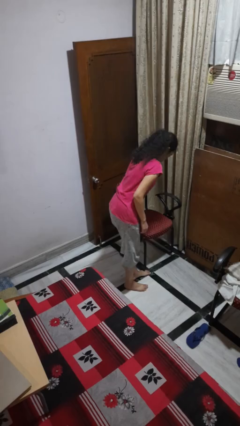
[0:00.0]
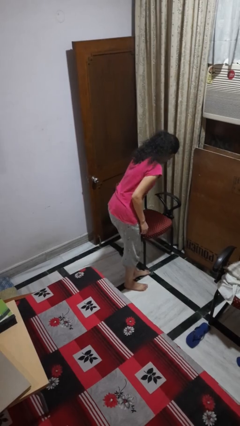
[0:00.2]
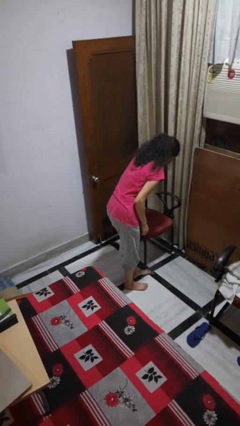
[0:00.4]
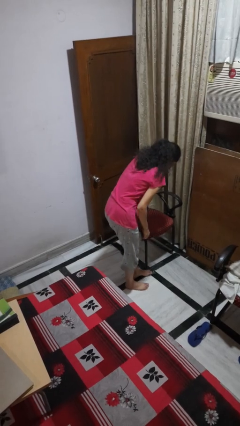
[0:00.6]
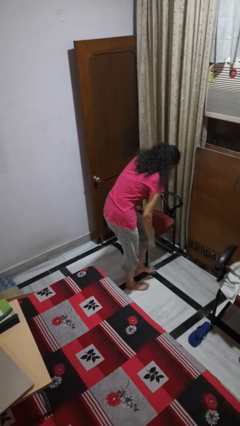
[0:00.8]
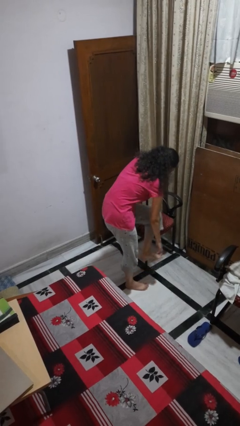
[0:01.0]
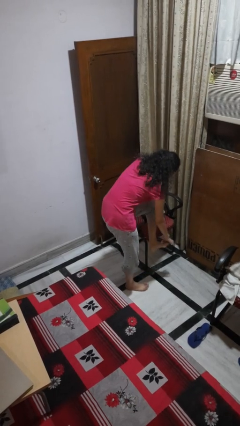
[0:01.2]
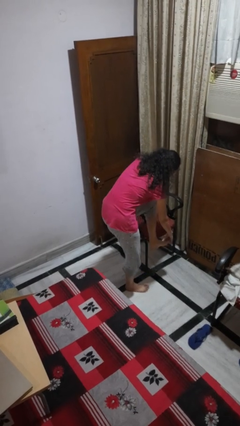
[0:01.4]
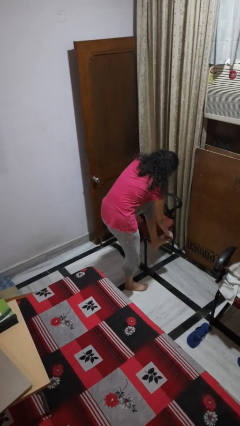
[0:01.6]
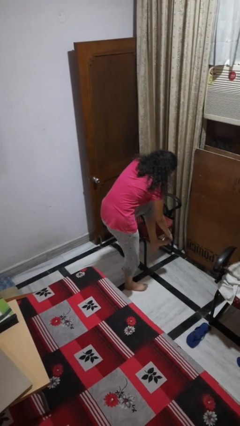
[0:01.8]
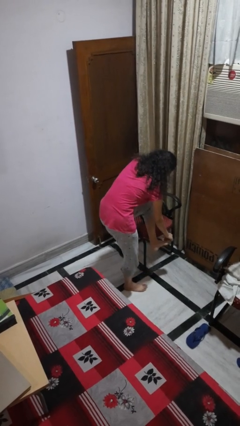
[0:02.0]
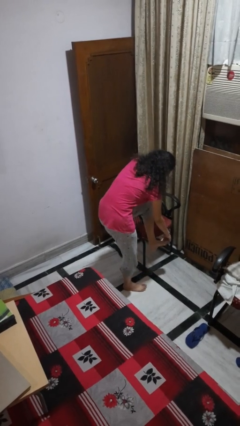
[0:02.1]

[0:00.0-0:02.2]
person stubs toe

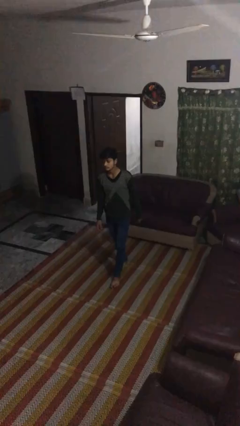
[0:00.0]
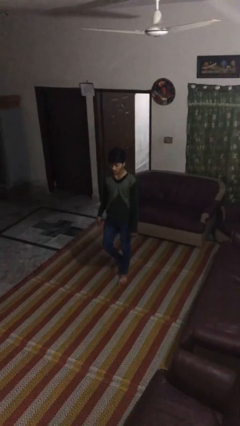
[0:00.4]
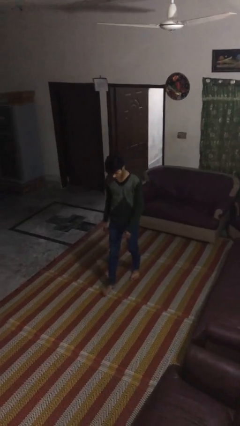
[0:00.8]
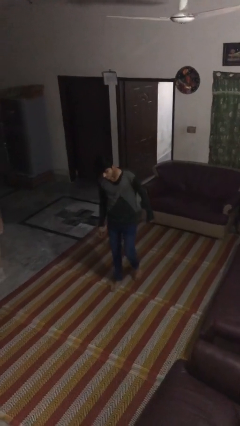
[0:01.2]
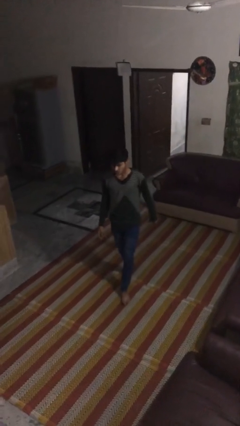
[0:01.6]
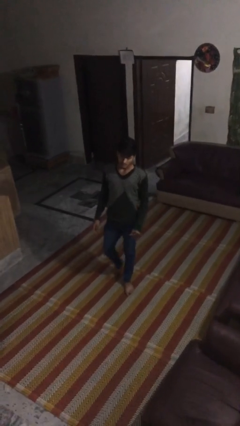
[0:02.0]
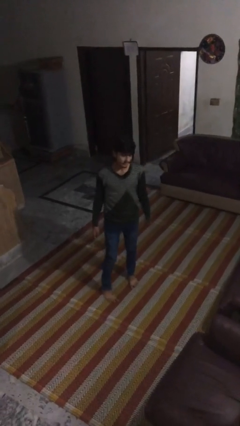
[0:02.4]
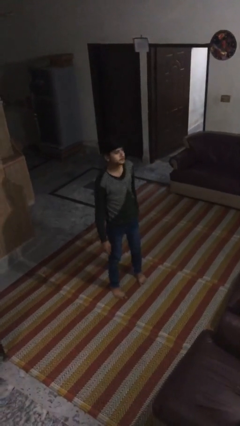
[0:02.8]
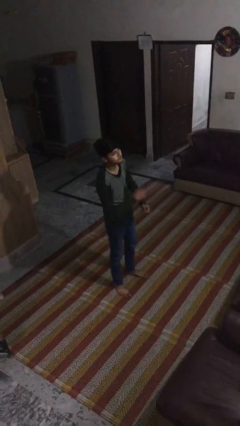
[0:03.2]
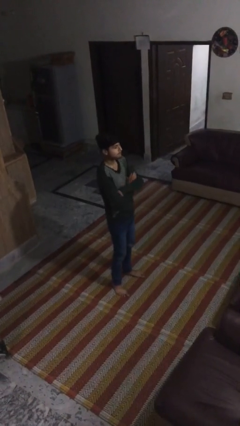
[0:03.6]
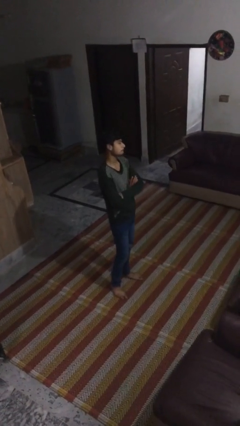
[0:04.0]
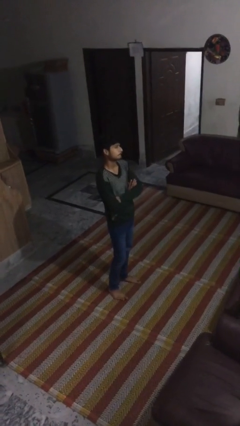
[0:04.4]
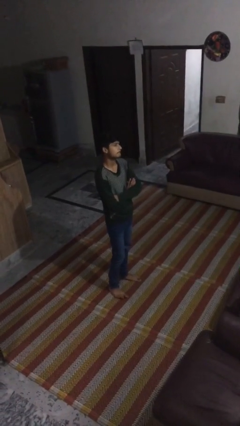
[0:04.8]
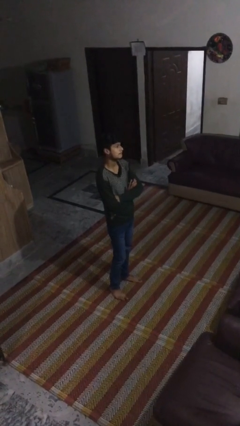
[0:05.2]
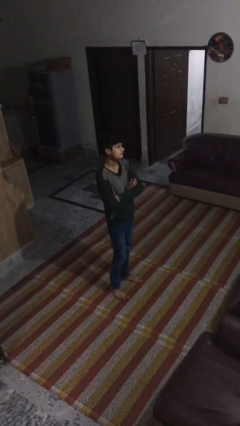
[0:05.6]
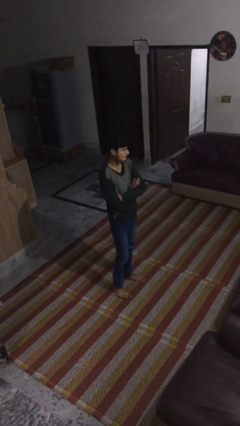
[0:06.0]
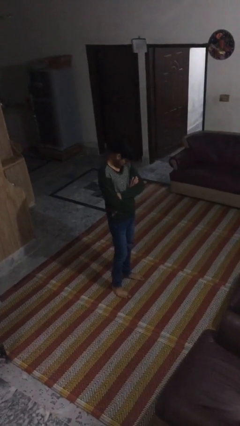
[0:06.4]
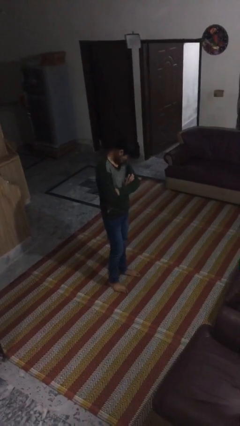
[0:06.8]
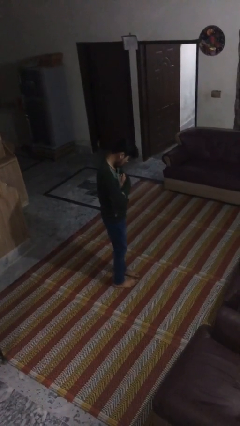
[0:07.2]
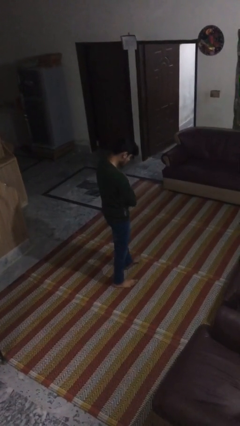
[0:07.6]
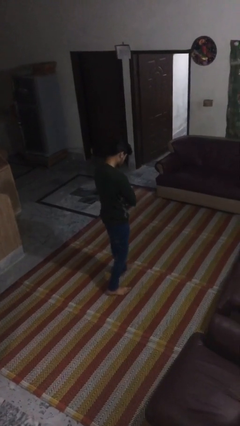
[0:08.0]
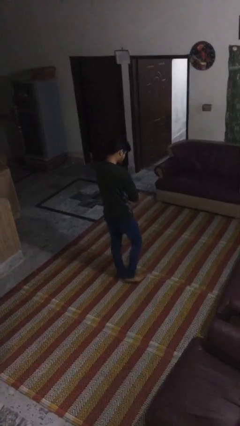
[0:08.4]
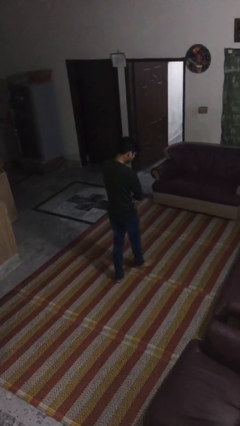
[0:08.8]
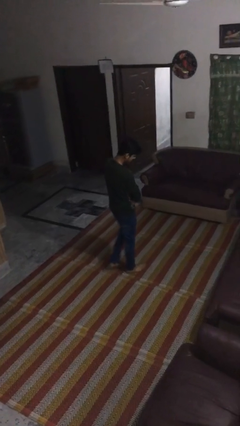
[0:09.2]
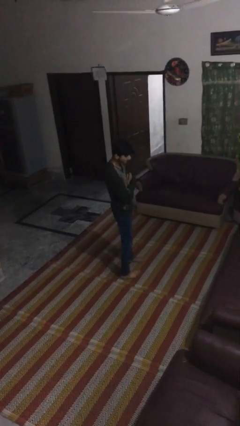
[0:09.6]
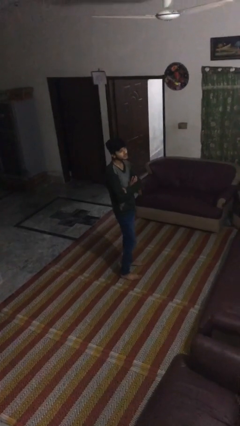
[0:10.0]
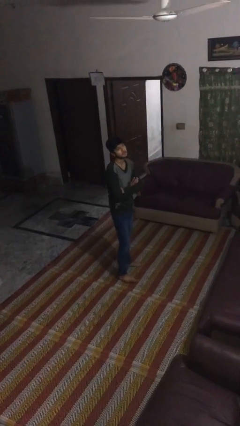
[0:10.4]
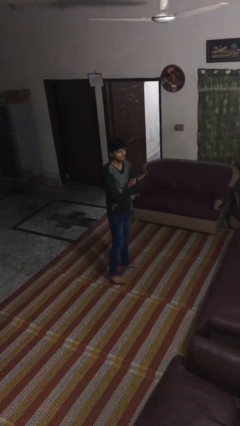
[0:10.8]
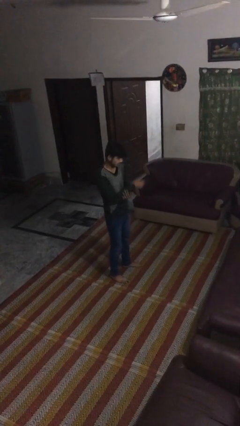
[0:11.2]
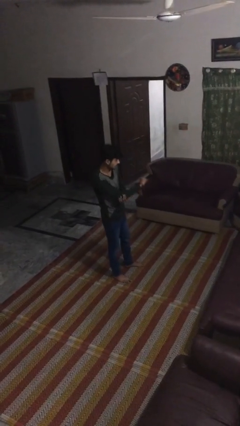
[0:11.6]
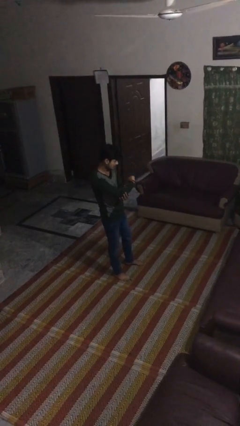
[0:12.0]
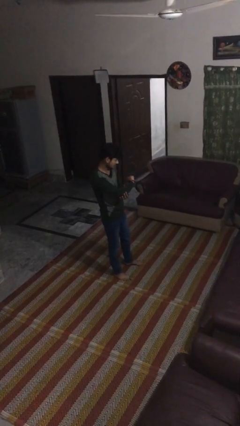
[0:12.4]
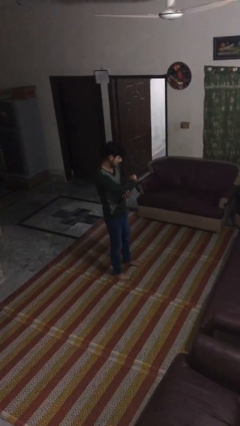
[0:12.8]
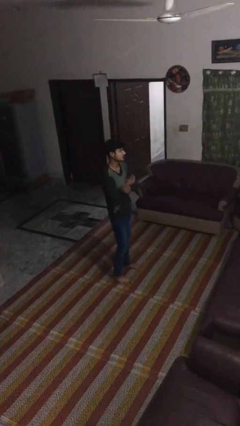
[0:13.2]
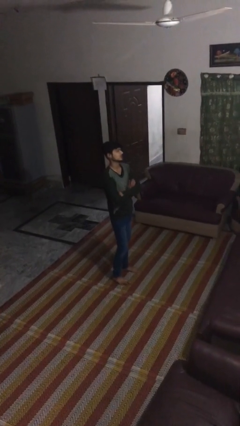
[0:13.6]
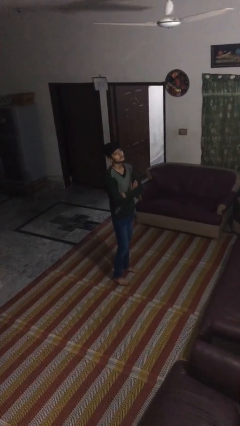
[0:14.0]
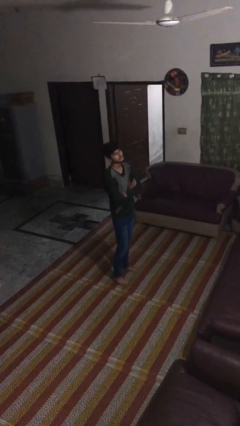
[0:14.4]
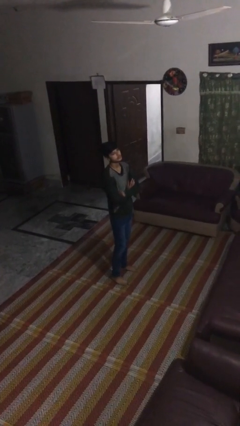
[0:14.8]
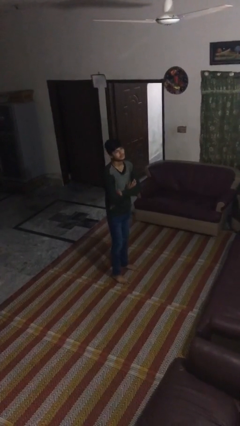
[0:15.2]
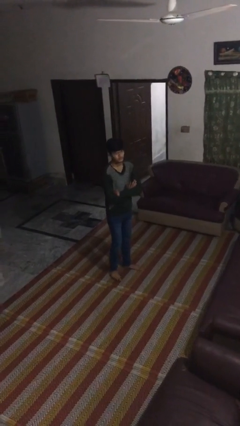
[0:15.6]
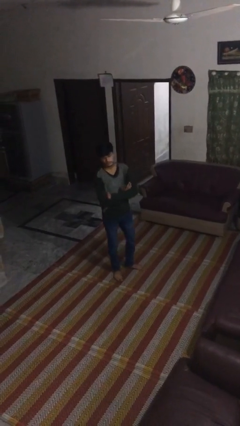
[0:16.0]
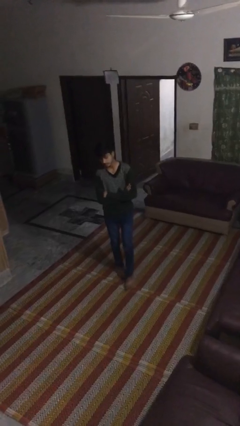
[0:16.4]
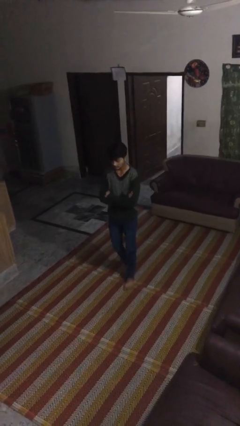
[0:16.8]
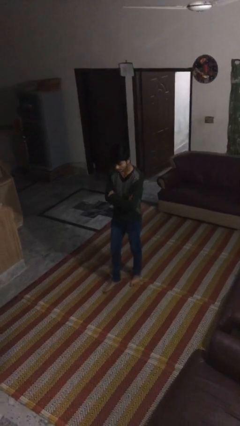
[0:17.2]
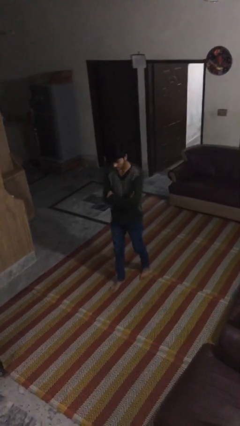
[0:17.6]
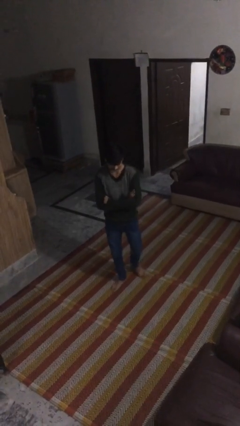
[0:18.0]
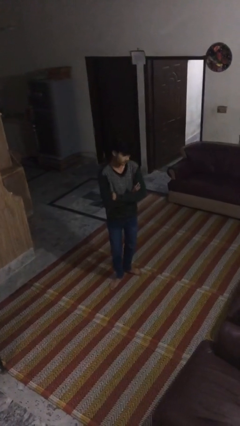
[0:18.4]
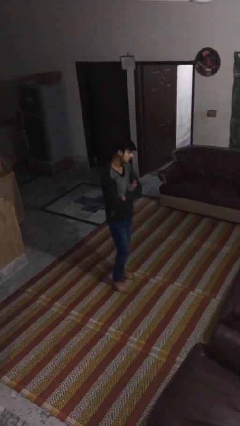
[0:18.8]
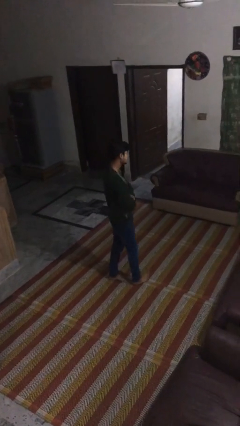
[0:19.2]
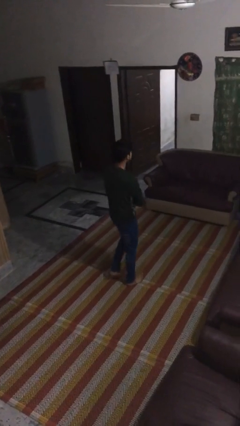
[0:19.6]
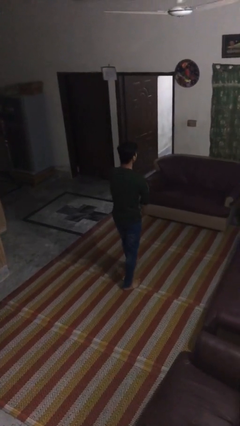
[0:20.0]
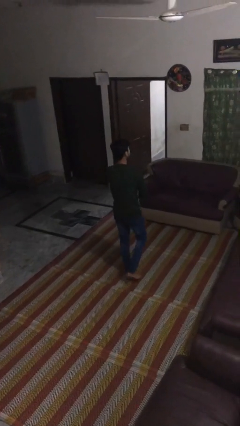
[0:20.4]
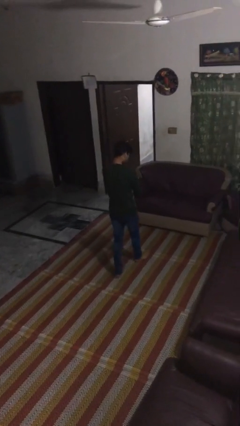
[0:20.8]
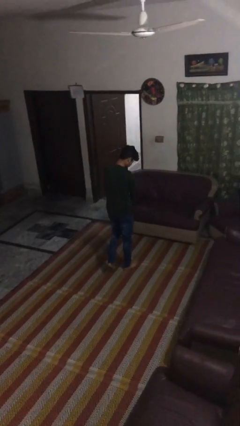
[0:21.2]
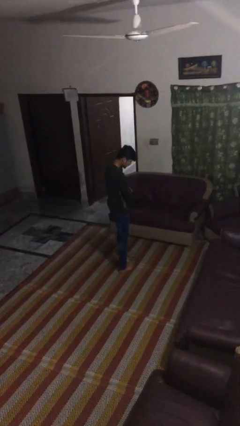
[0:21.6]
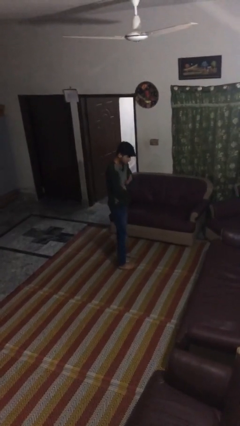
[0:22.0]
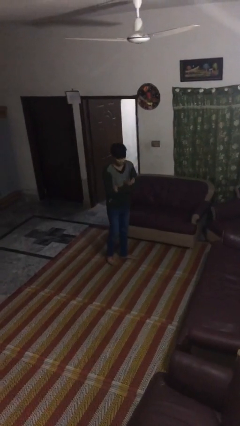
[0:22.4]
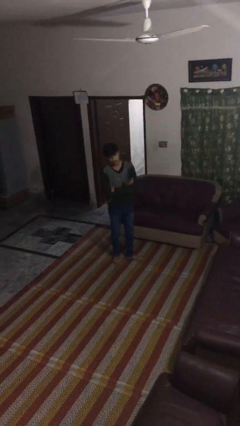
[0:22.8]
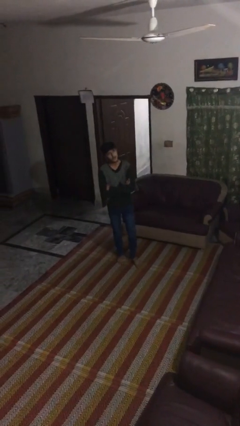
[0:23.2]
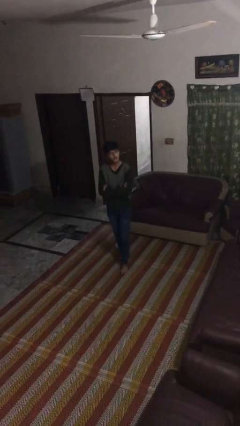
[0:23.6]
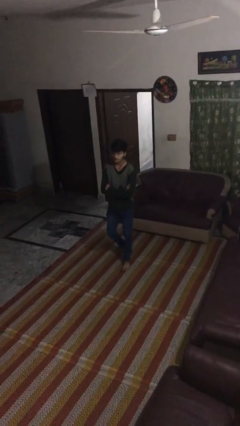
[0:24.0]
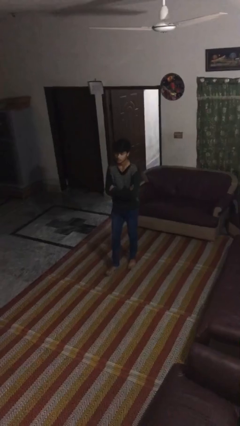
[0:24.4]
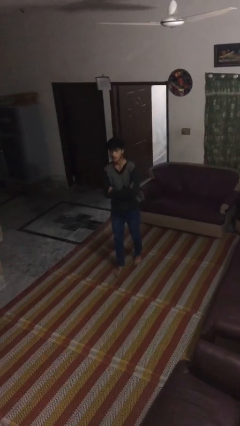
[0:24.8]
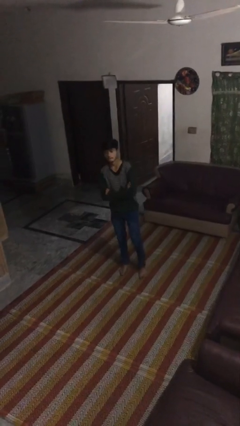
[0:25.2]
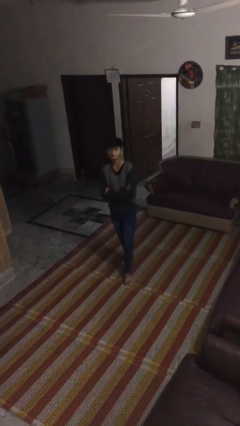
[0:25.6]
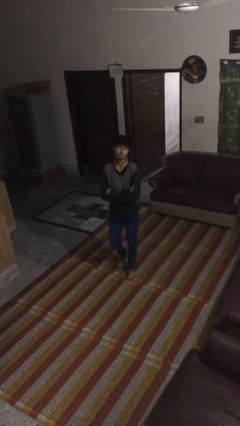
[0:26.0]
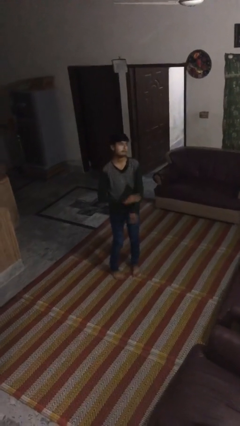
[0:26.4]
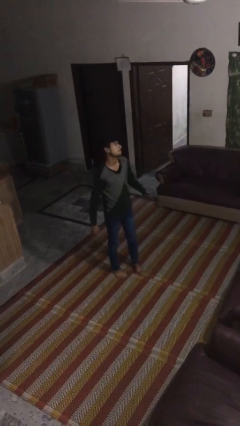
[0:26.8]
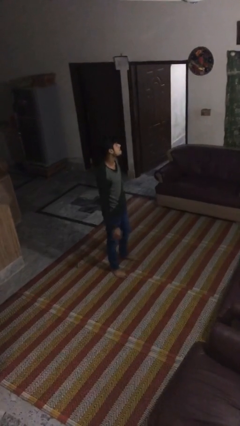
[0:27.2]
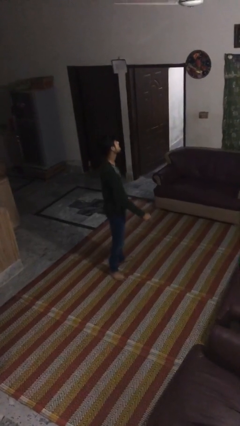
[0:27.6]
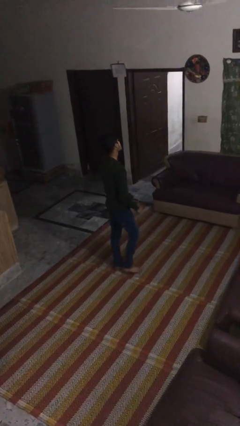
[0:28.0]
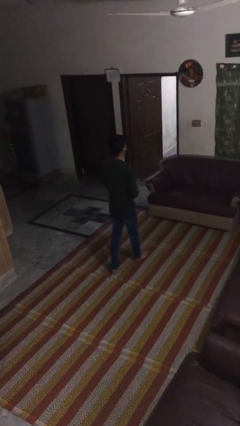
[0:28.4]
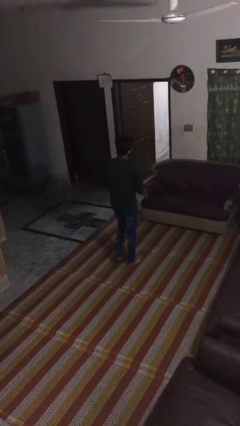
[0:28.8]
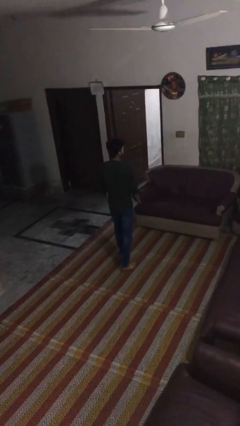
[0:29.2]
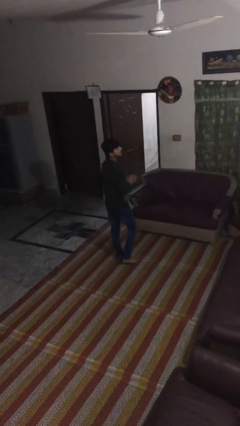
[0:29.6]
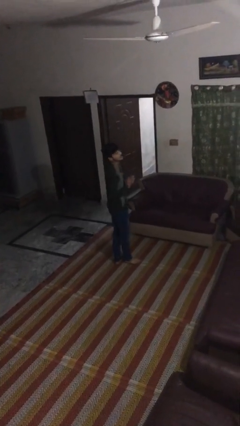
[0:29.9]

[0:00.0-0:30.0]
person walks

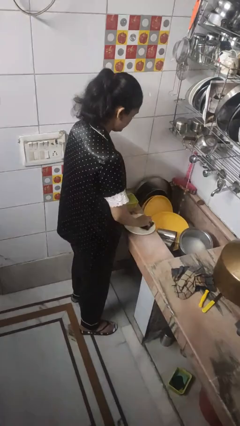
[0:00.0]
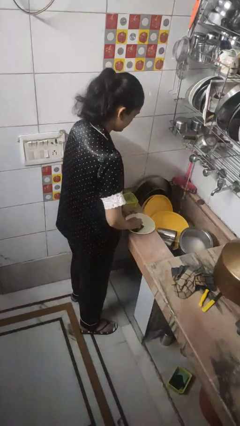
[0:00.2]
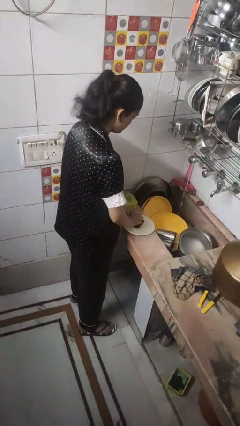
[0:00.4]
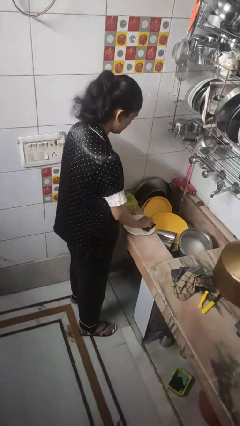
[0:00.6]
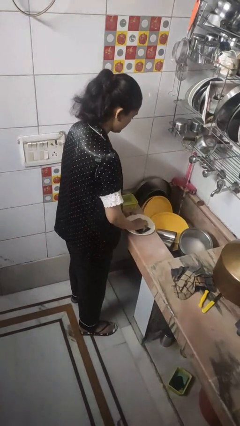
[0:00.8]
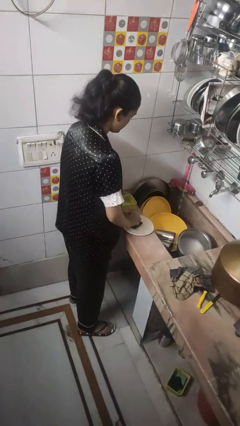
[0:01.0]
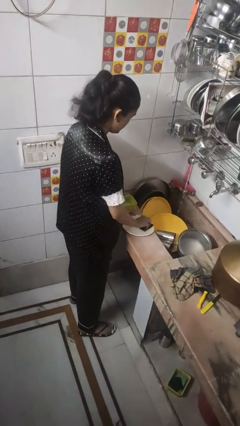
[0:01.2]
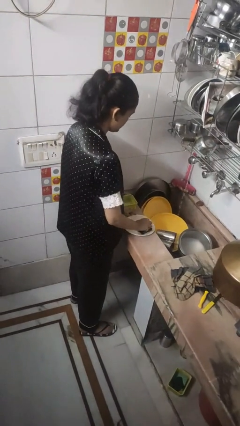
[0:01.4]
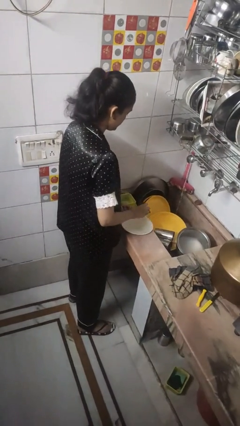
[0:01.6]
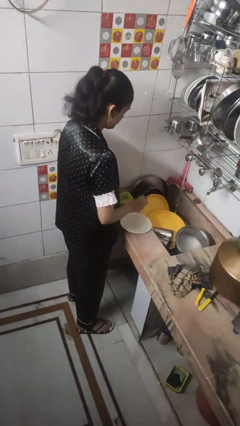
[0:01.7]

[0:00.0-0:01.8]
person washes dish
